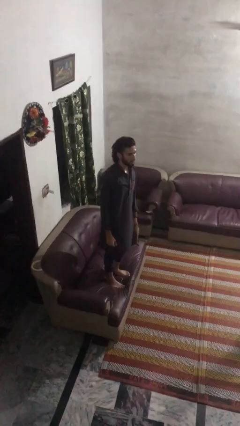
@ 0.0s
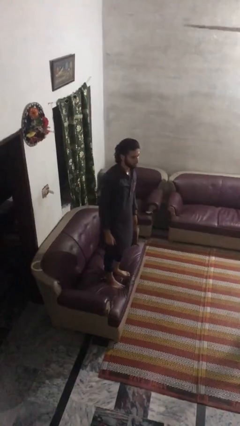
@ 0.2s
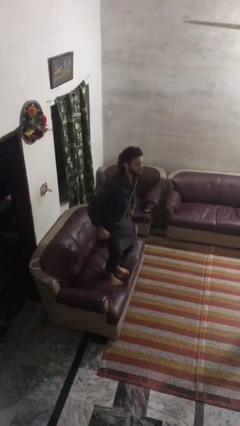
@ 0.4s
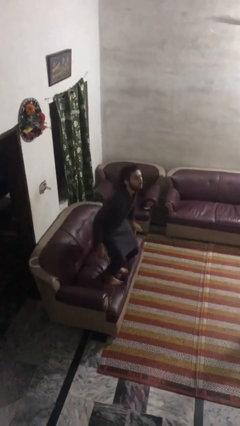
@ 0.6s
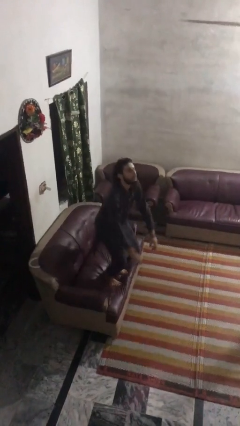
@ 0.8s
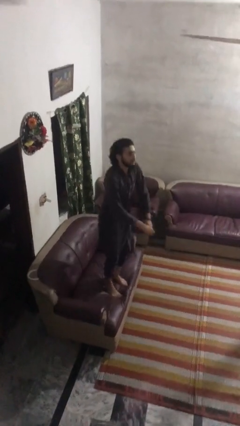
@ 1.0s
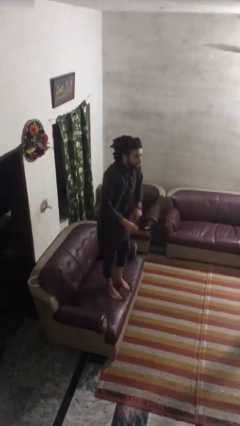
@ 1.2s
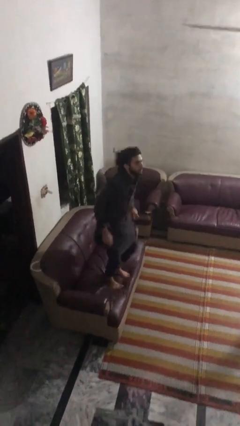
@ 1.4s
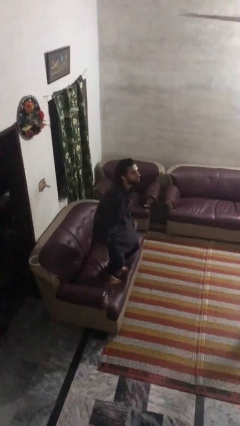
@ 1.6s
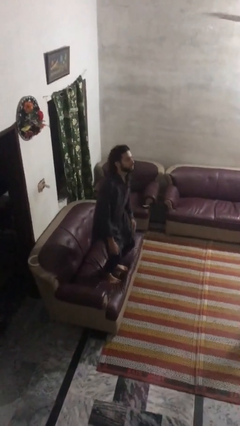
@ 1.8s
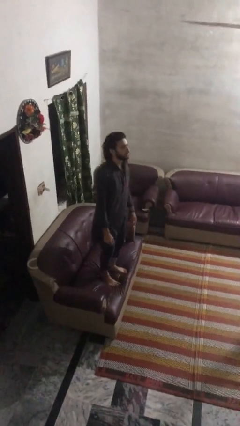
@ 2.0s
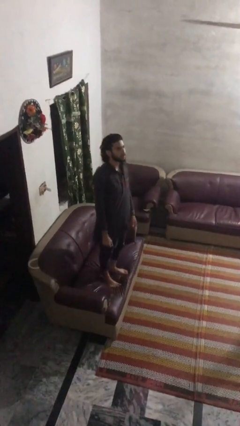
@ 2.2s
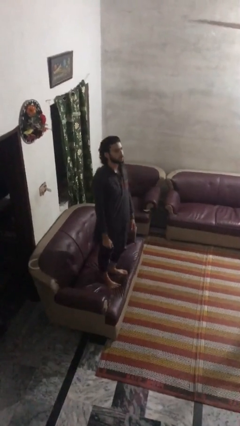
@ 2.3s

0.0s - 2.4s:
person jumps on couch

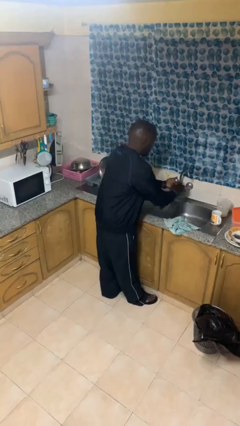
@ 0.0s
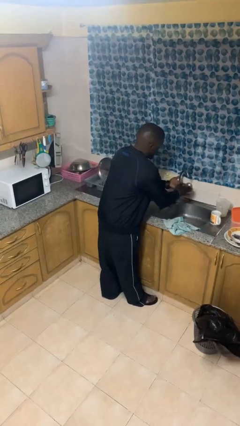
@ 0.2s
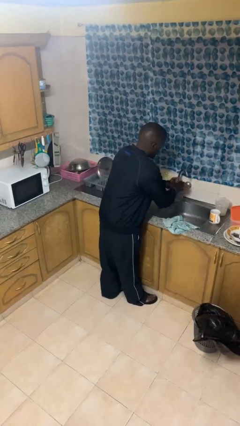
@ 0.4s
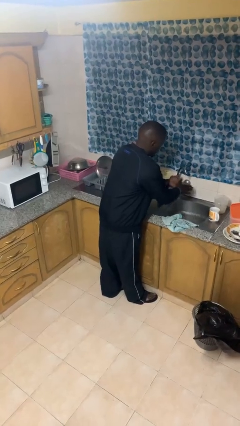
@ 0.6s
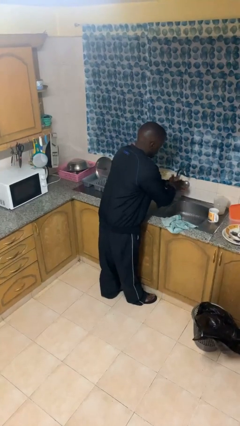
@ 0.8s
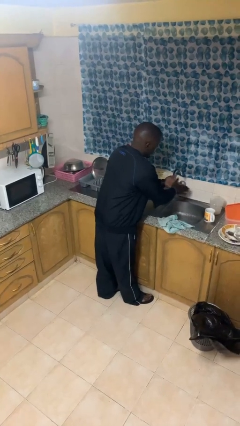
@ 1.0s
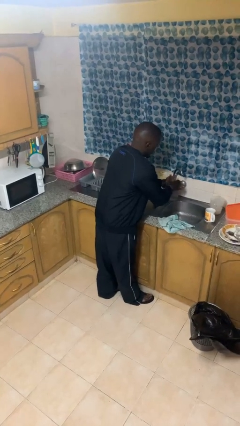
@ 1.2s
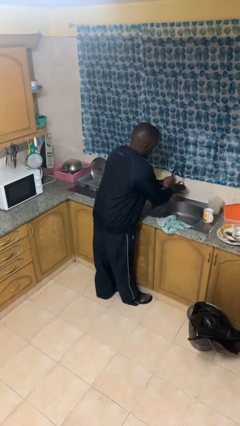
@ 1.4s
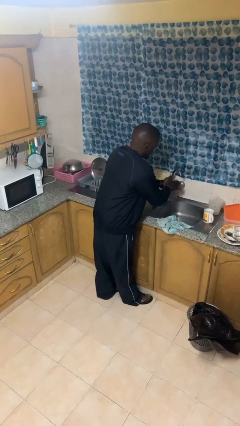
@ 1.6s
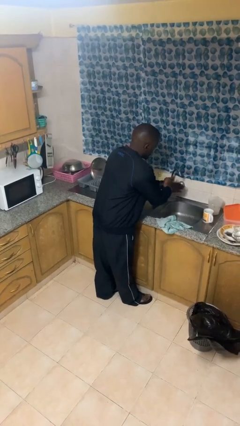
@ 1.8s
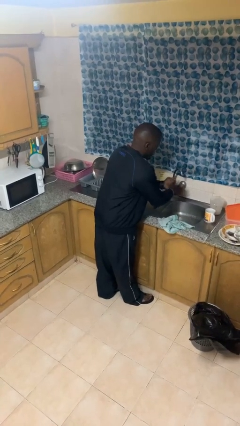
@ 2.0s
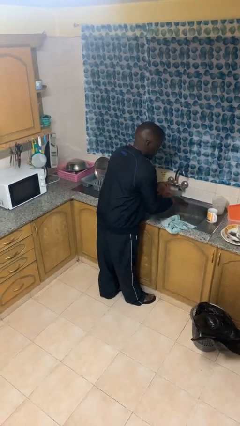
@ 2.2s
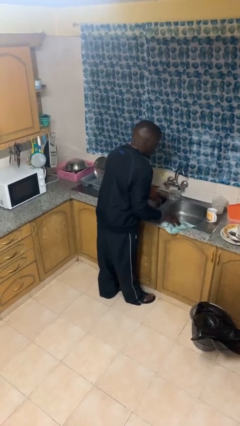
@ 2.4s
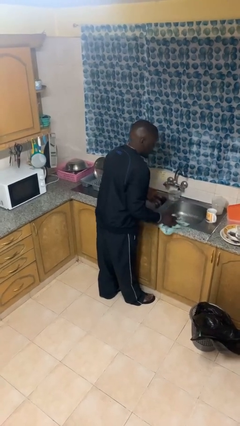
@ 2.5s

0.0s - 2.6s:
person washes hands

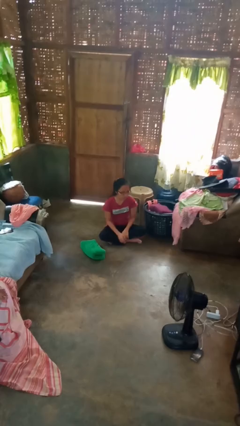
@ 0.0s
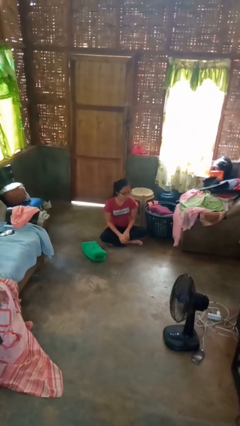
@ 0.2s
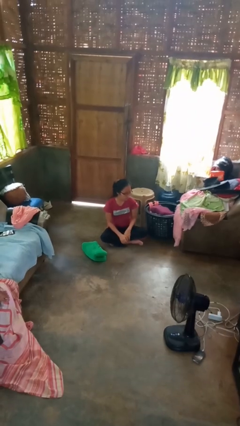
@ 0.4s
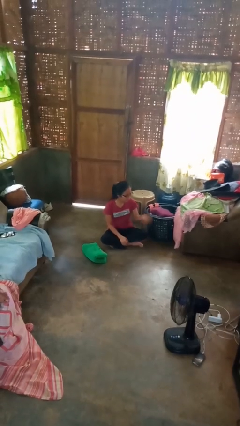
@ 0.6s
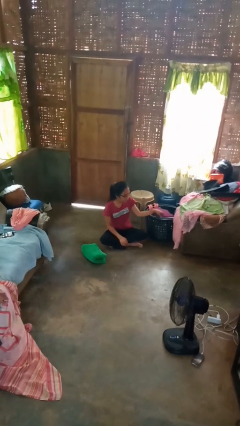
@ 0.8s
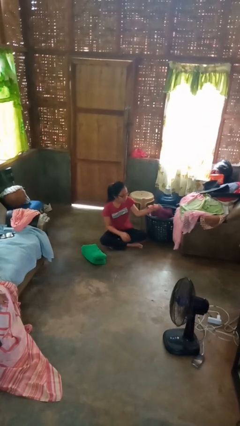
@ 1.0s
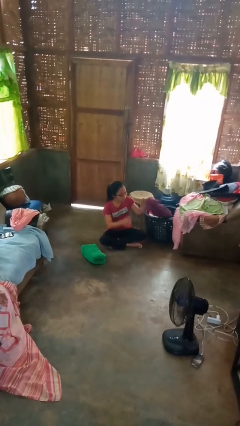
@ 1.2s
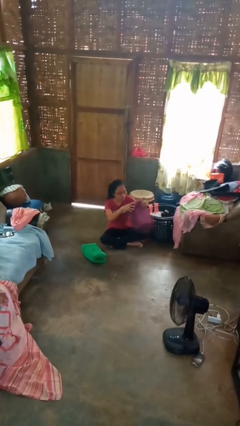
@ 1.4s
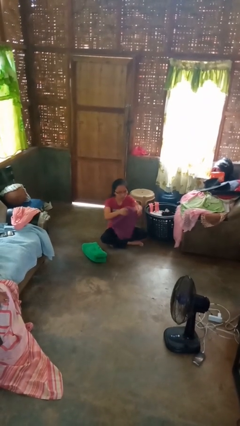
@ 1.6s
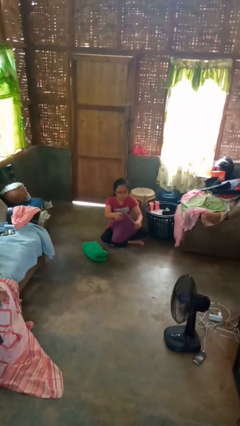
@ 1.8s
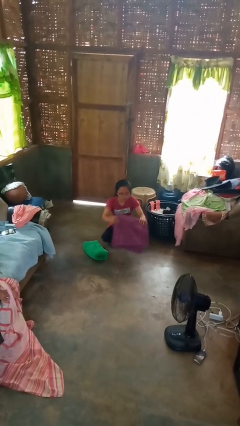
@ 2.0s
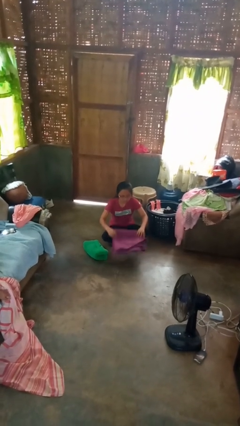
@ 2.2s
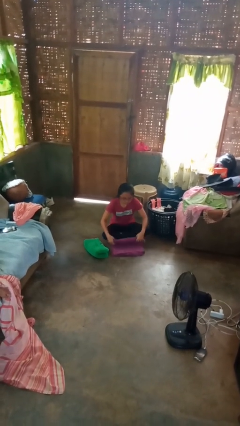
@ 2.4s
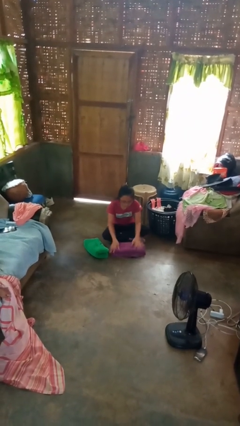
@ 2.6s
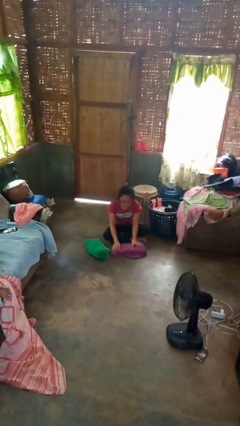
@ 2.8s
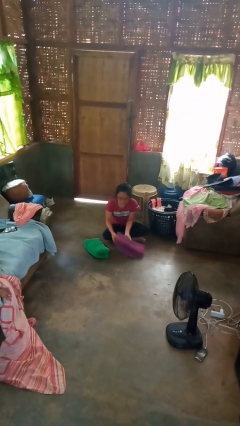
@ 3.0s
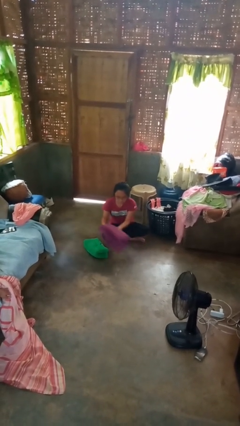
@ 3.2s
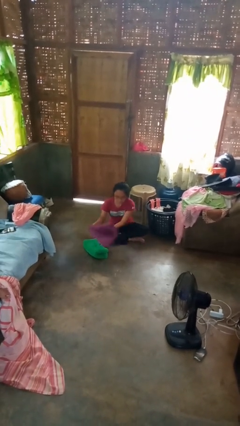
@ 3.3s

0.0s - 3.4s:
person folds towel

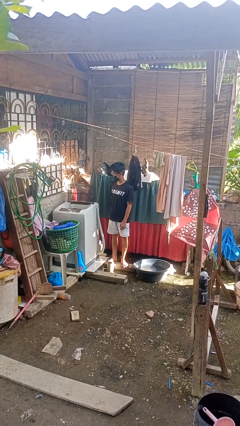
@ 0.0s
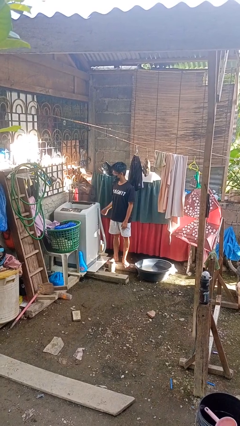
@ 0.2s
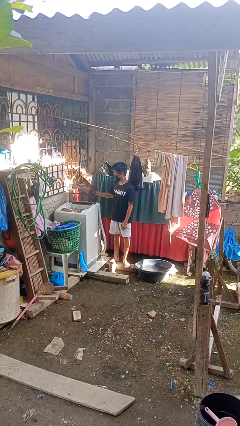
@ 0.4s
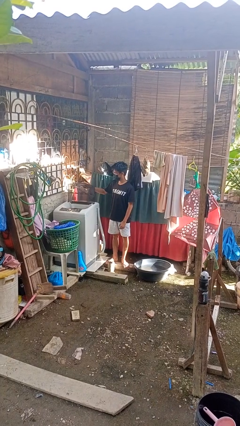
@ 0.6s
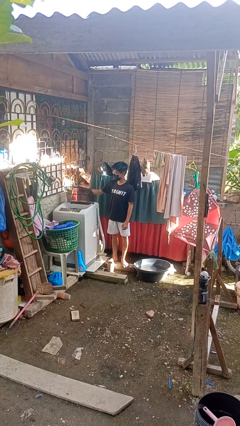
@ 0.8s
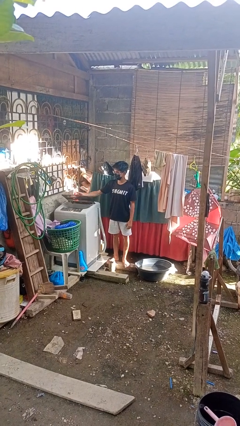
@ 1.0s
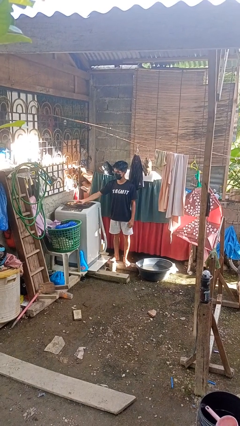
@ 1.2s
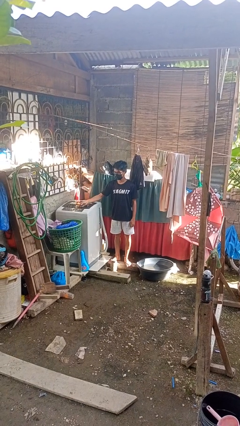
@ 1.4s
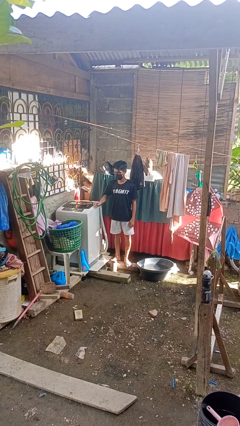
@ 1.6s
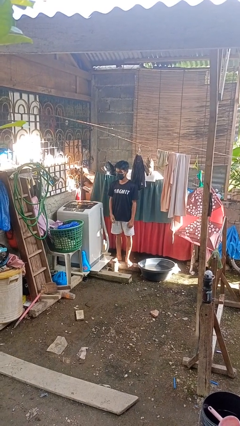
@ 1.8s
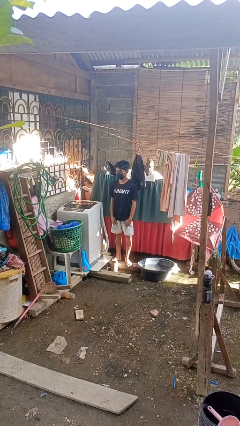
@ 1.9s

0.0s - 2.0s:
person closes clothes washer

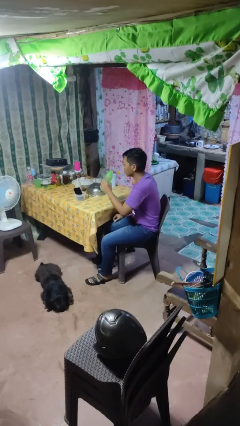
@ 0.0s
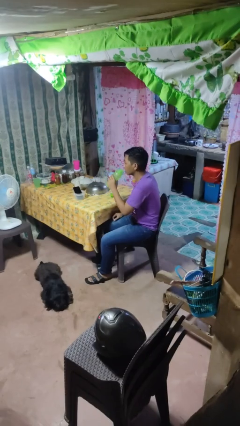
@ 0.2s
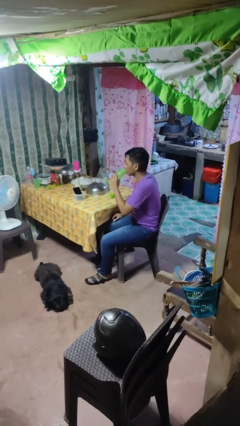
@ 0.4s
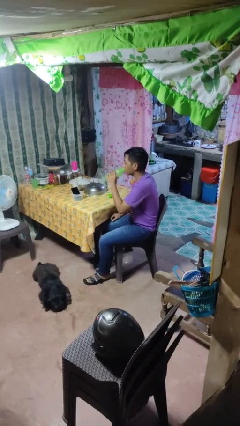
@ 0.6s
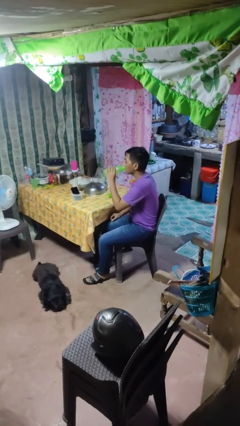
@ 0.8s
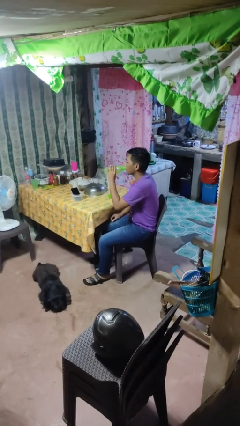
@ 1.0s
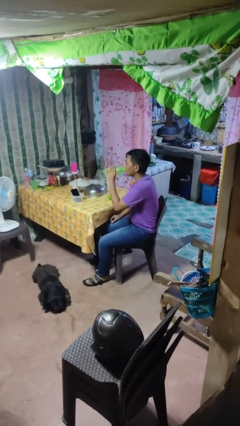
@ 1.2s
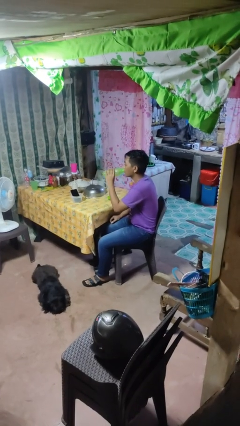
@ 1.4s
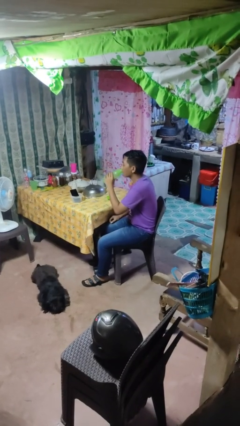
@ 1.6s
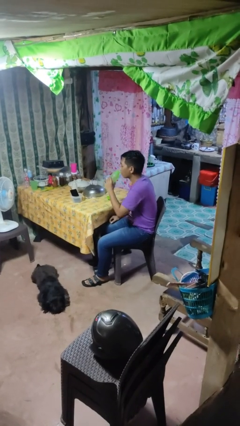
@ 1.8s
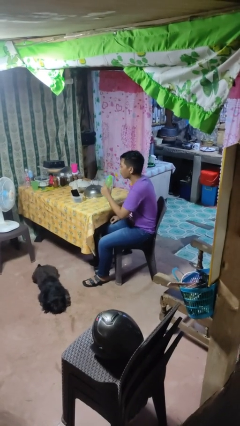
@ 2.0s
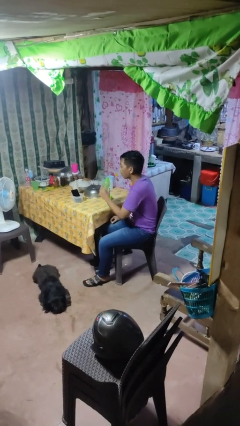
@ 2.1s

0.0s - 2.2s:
person drinks from bottle

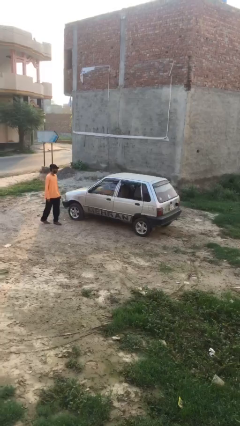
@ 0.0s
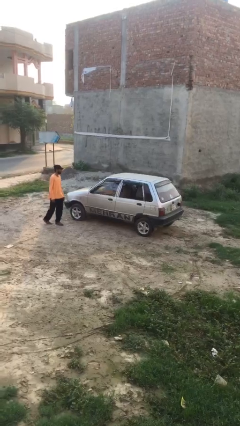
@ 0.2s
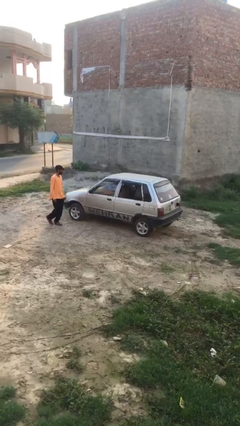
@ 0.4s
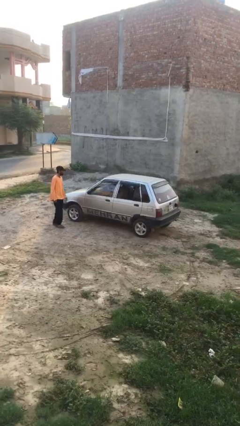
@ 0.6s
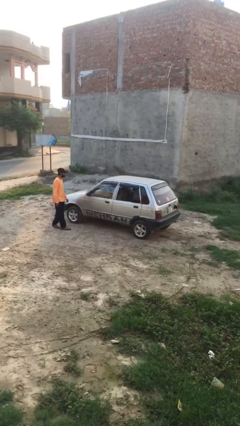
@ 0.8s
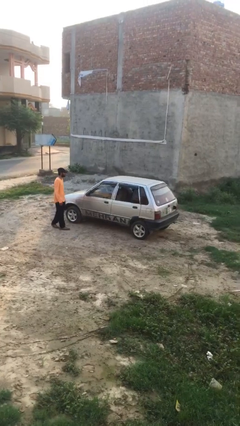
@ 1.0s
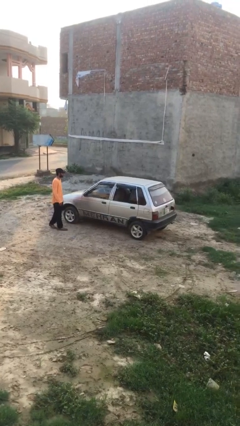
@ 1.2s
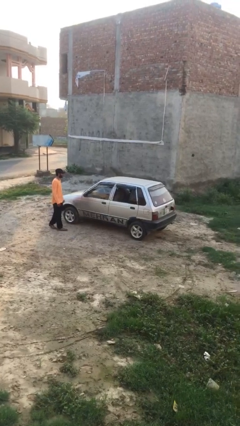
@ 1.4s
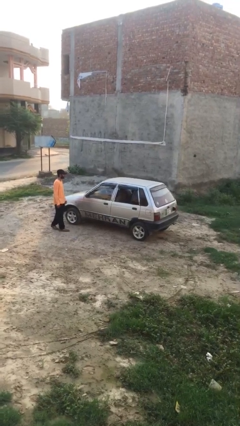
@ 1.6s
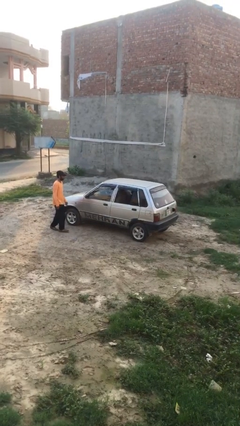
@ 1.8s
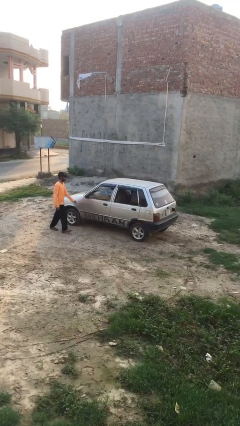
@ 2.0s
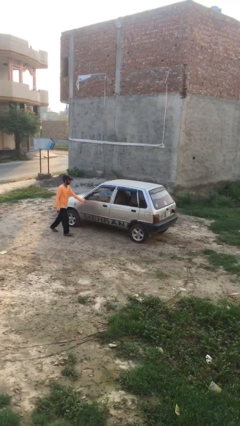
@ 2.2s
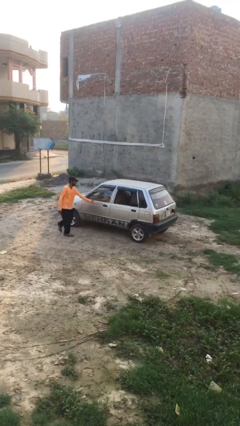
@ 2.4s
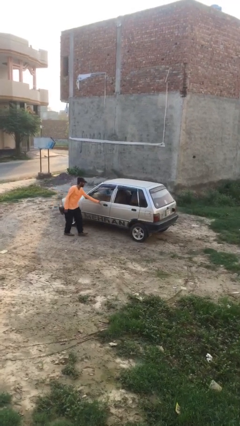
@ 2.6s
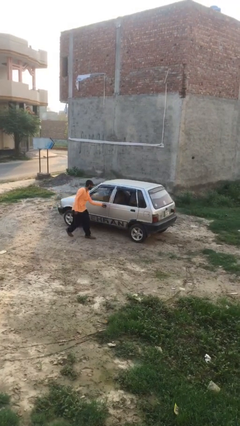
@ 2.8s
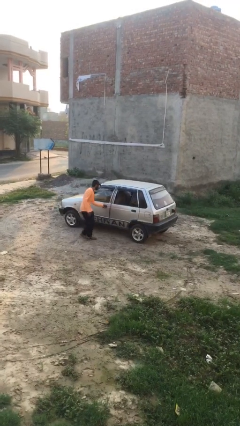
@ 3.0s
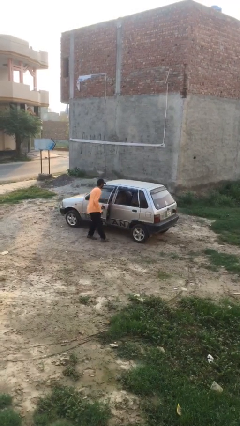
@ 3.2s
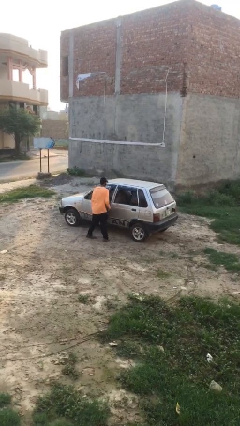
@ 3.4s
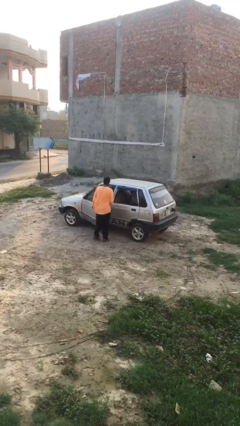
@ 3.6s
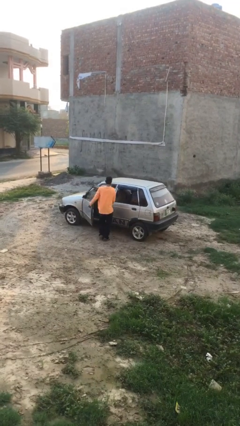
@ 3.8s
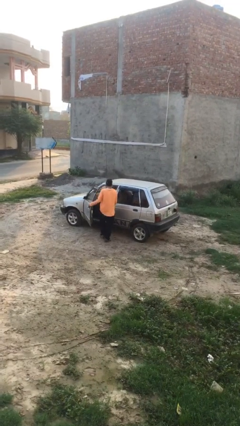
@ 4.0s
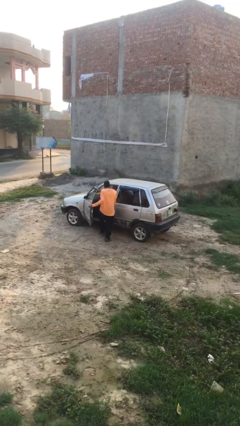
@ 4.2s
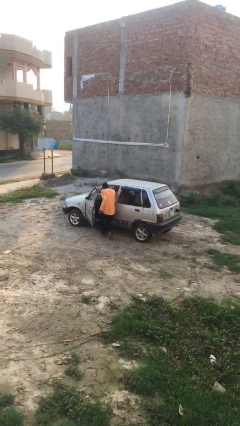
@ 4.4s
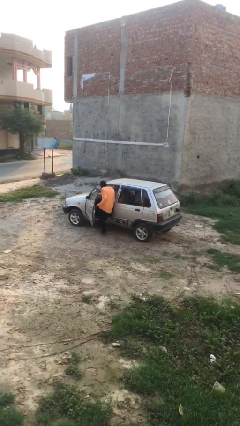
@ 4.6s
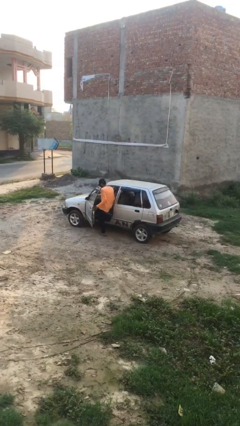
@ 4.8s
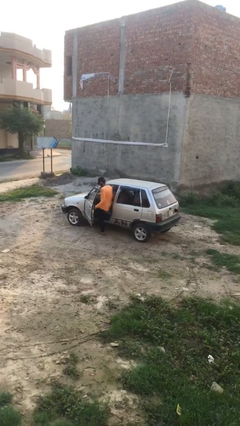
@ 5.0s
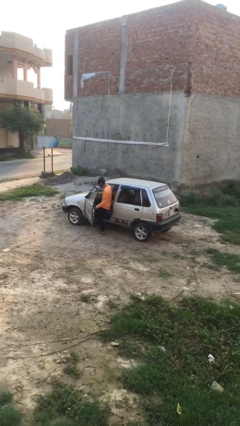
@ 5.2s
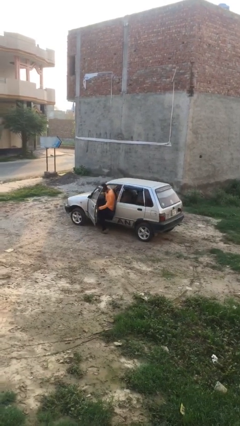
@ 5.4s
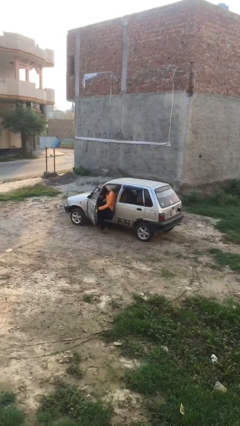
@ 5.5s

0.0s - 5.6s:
car picks up person
